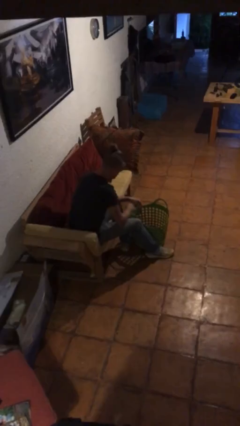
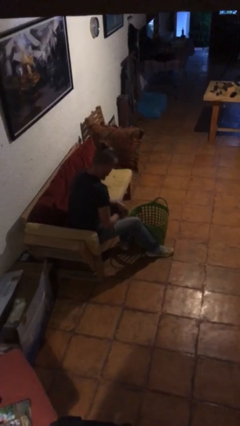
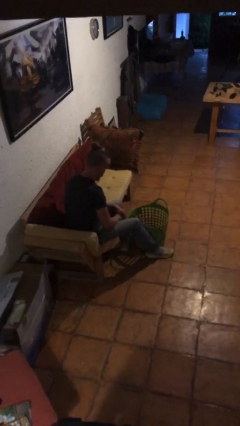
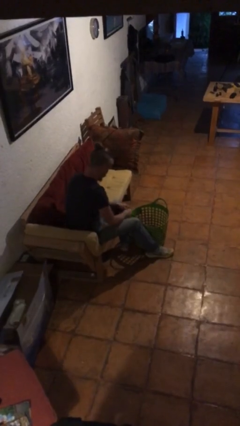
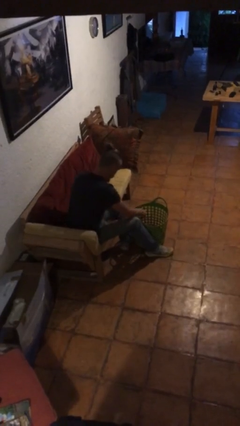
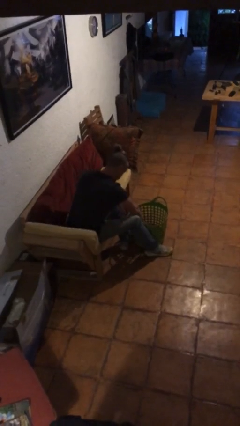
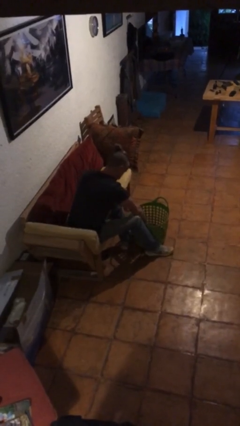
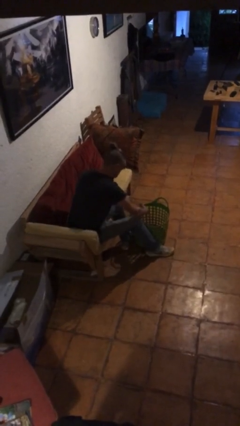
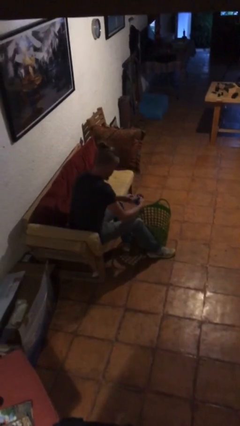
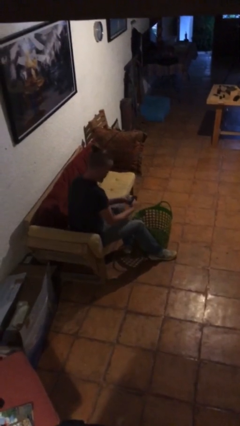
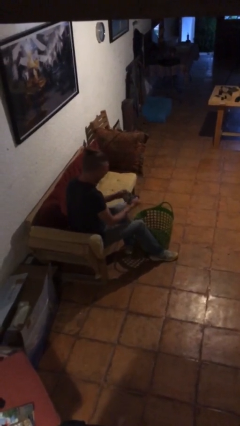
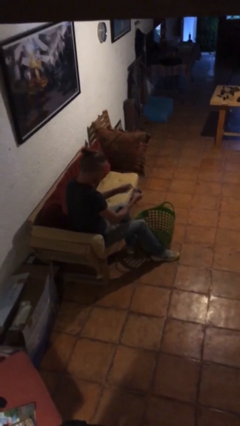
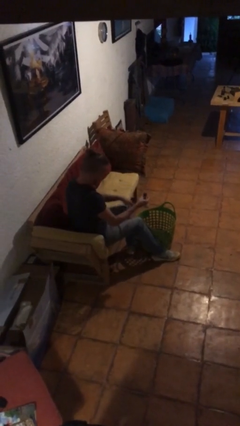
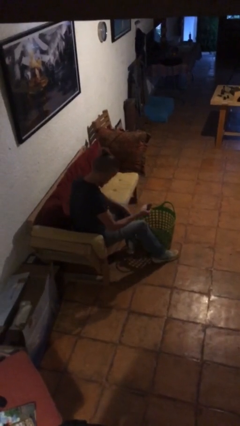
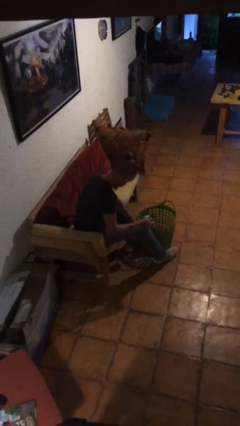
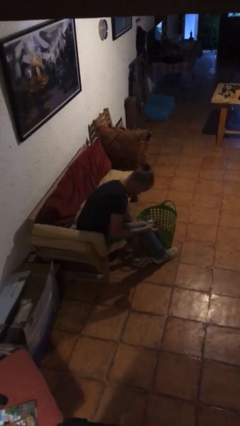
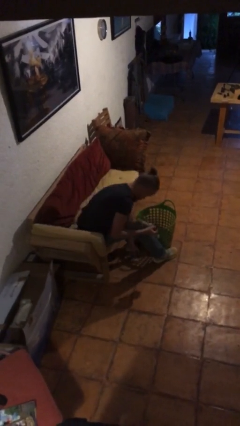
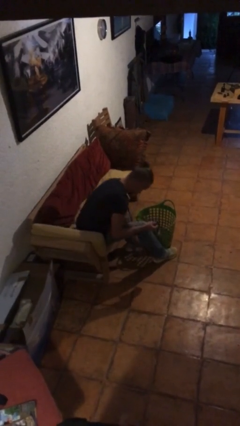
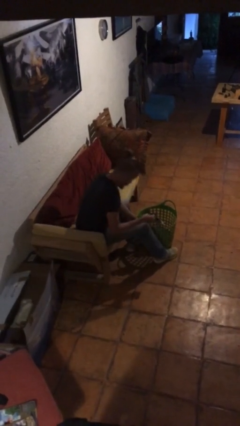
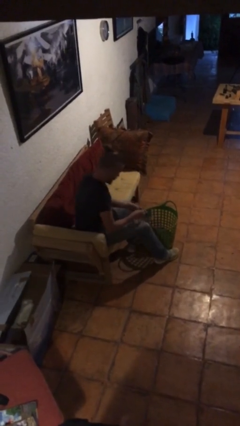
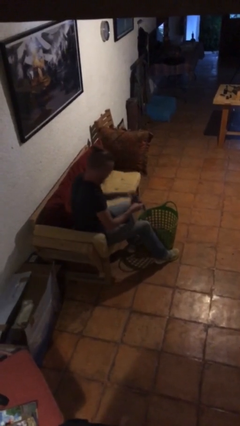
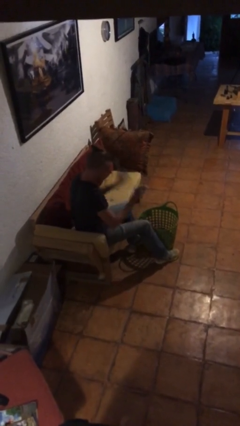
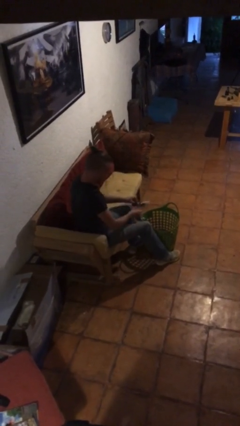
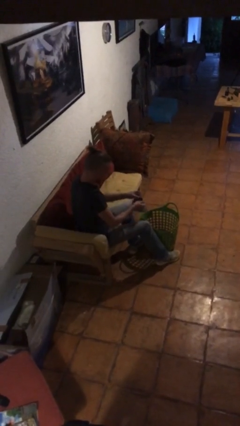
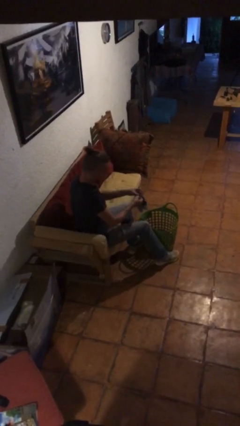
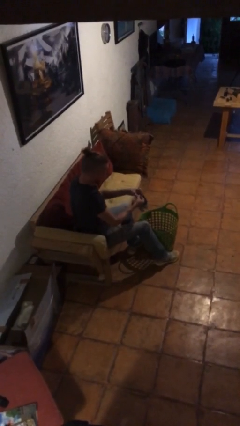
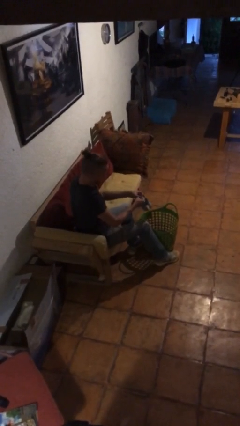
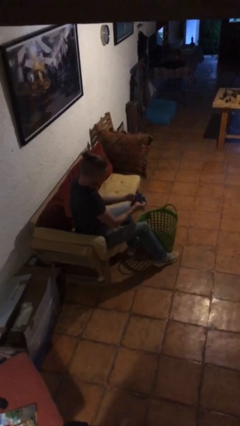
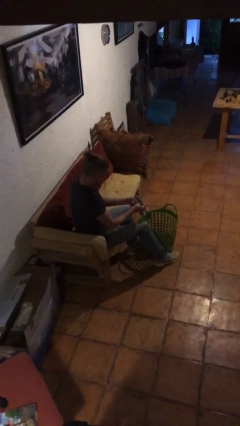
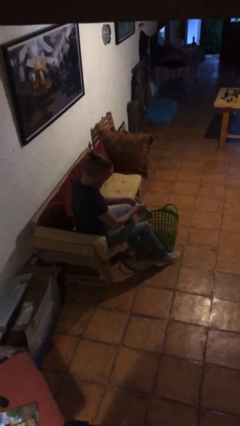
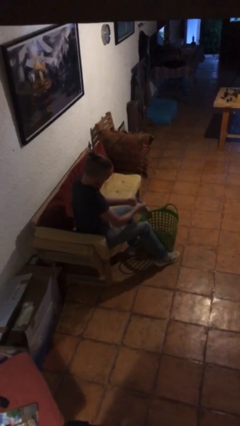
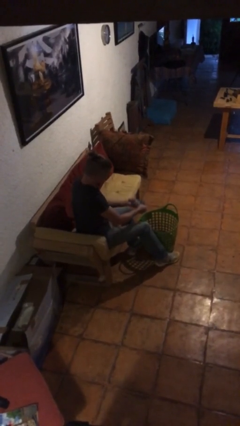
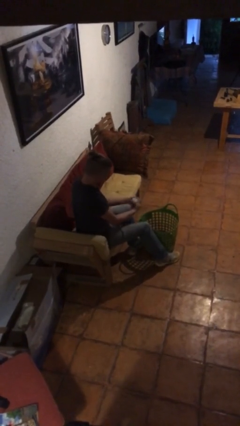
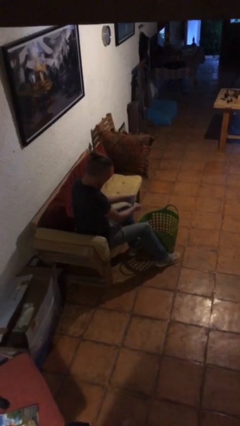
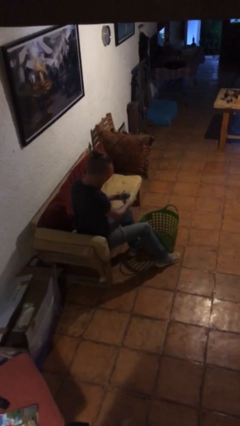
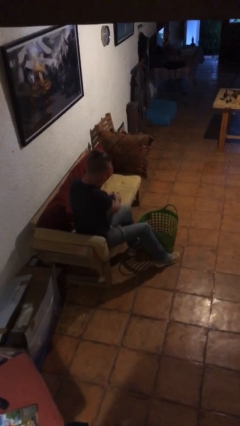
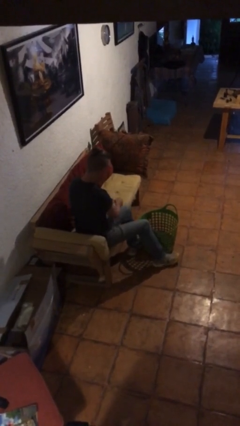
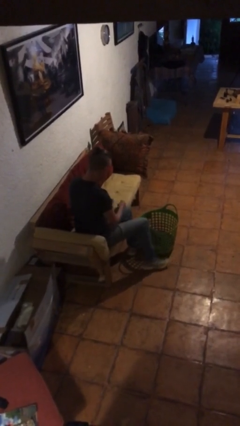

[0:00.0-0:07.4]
person folds socks

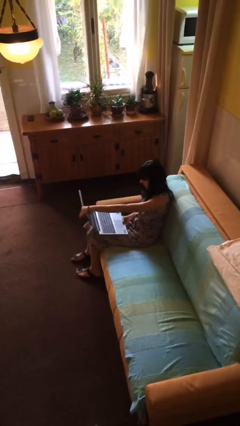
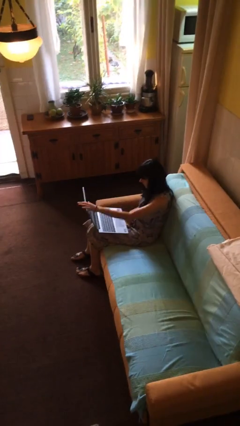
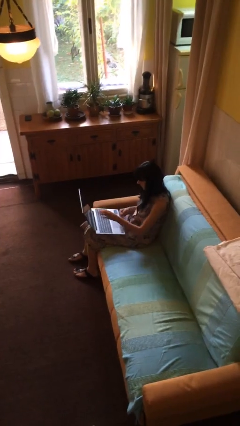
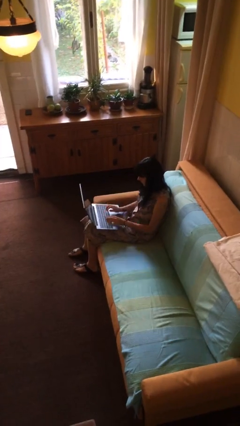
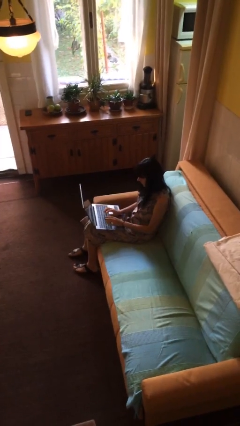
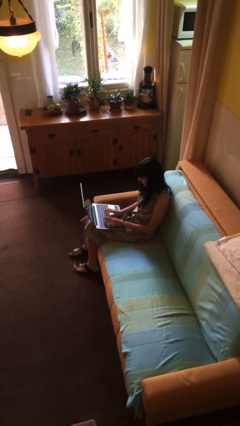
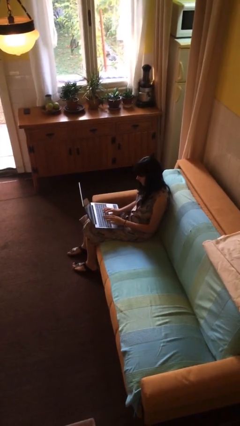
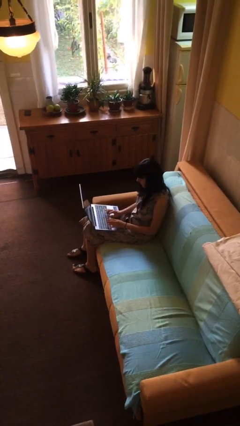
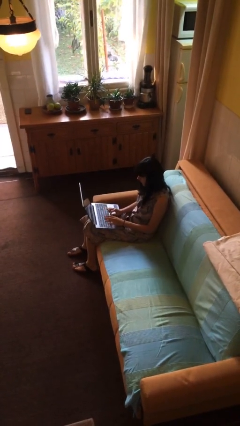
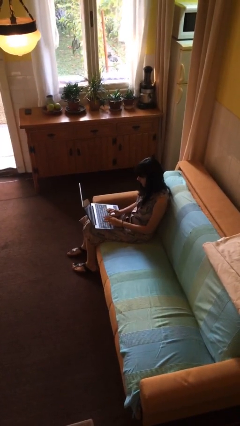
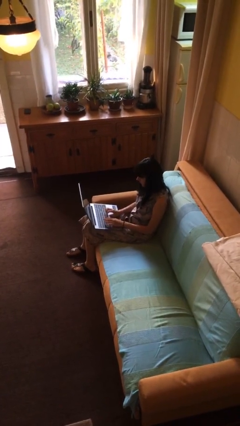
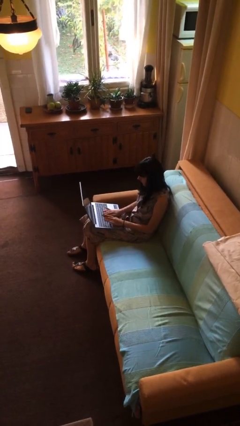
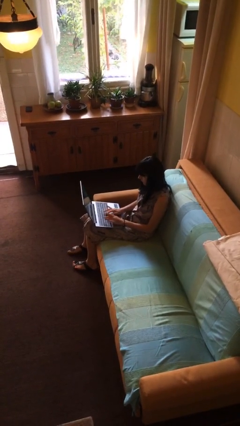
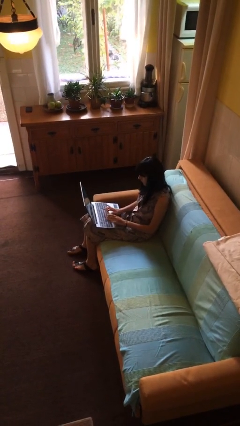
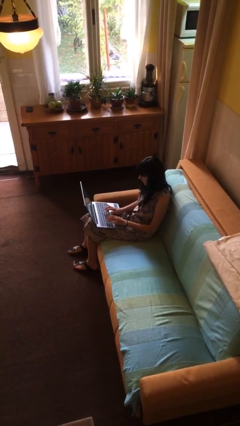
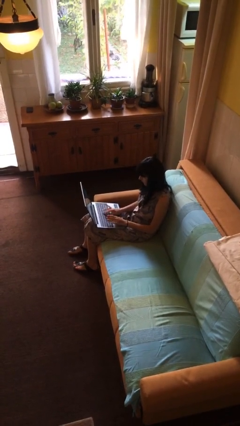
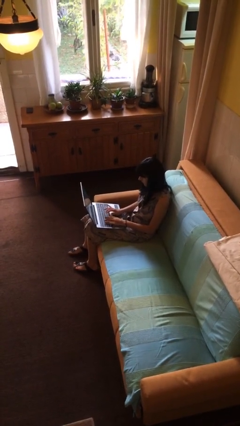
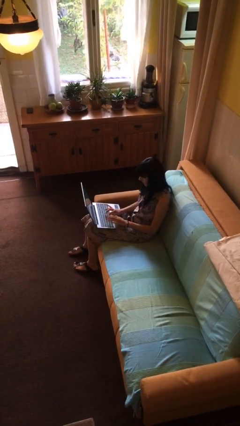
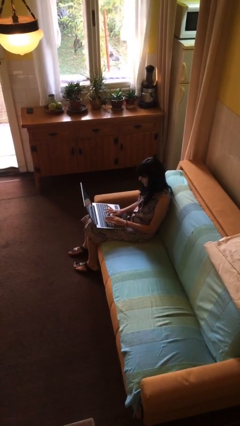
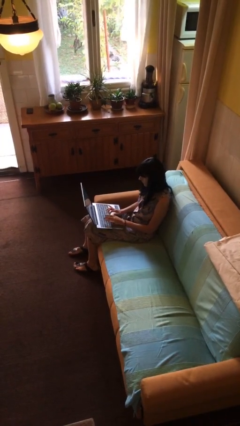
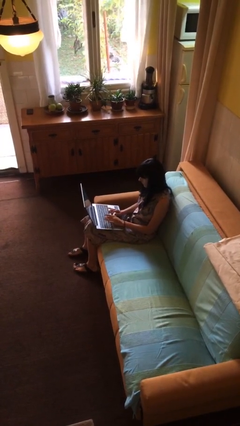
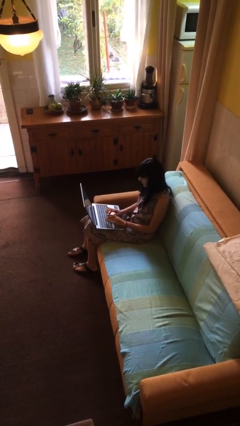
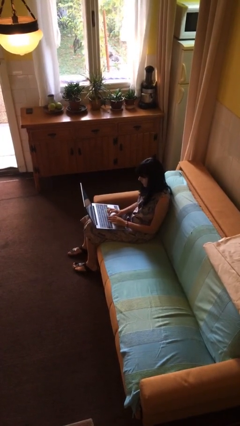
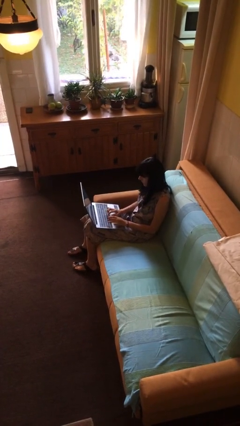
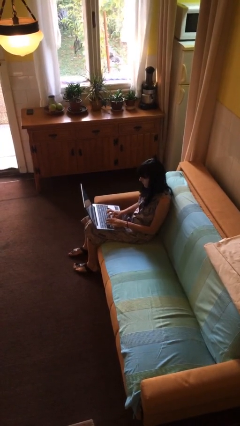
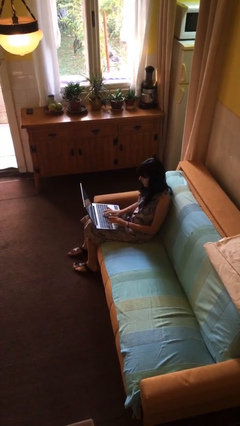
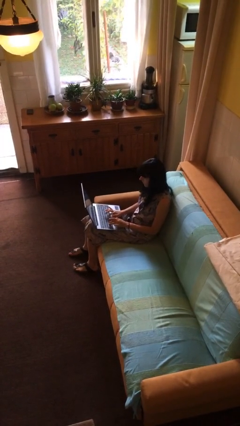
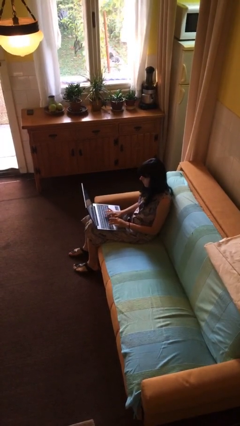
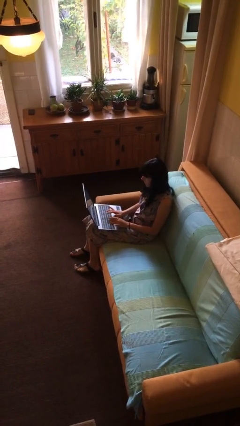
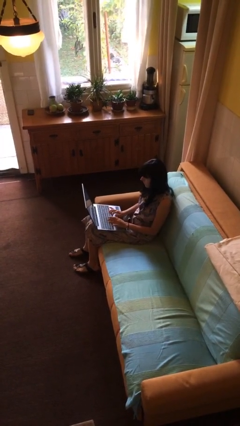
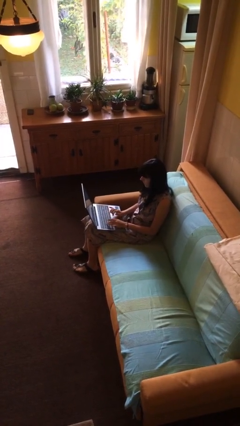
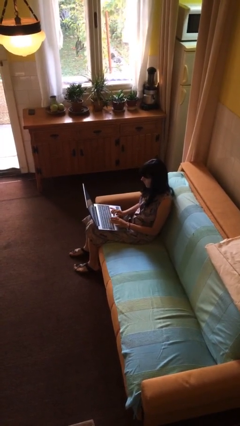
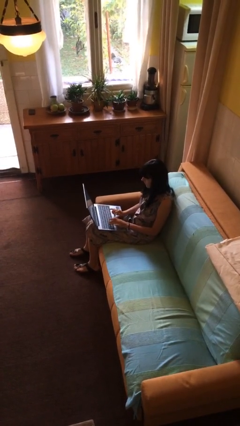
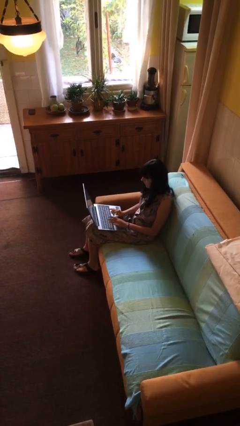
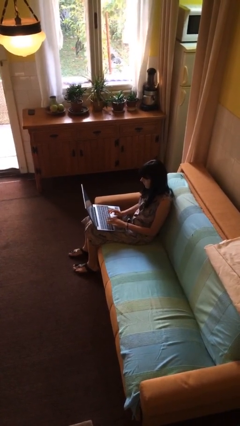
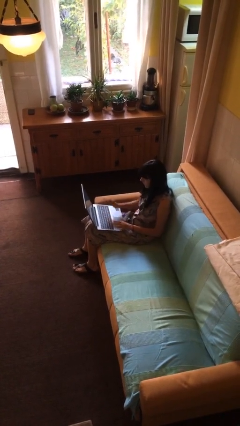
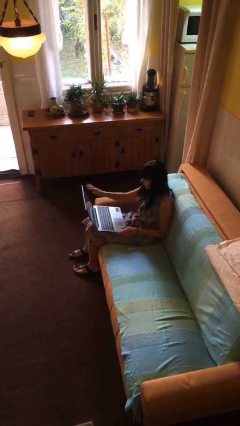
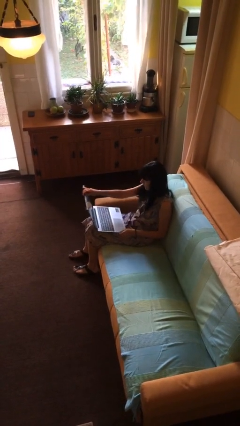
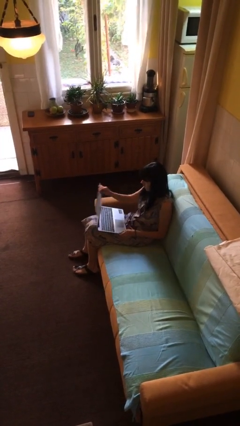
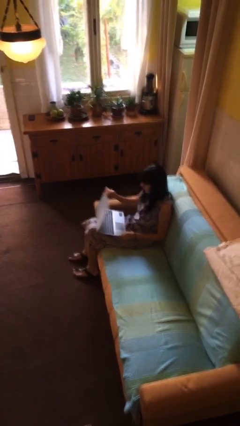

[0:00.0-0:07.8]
person interacts with laptop

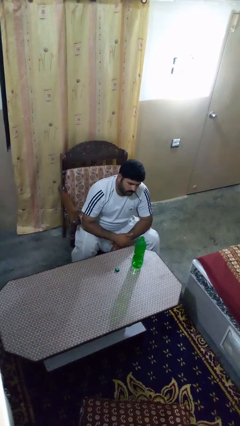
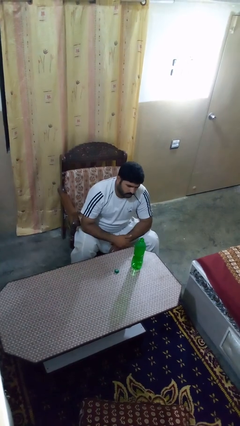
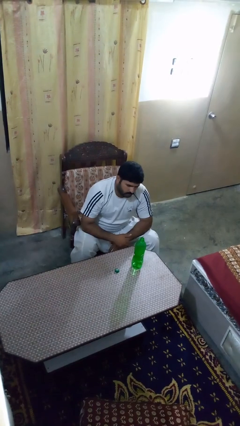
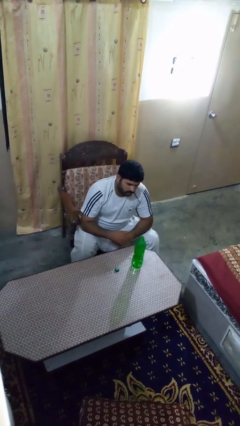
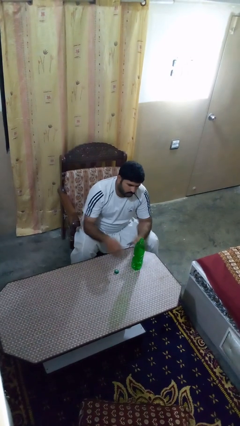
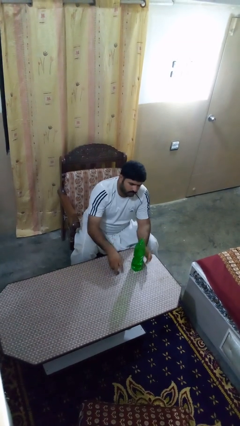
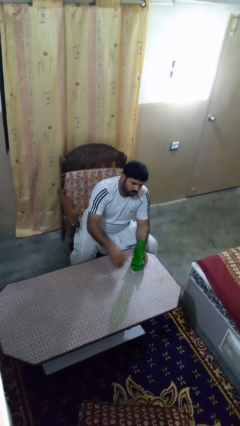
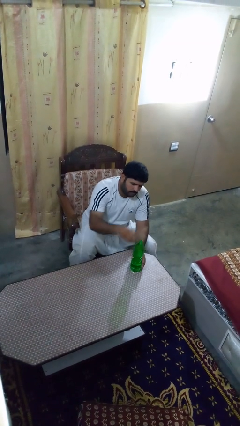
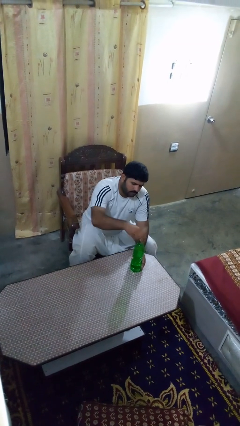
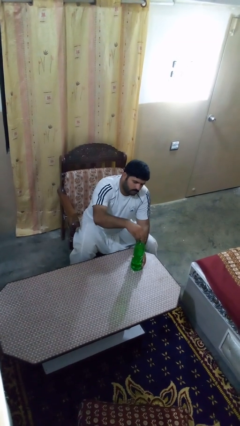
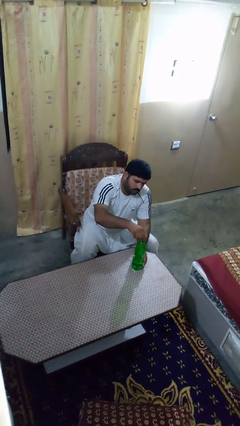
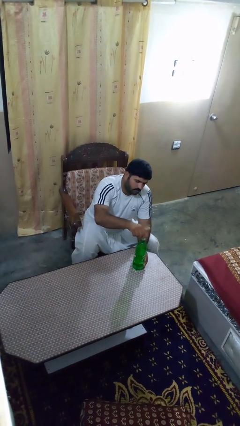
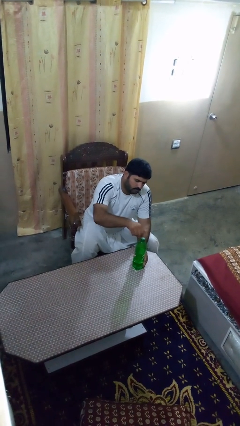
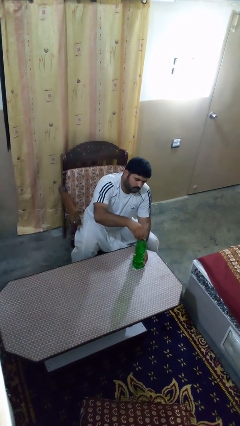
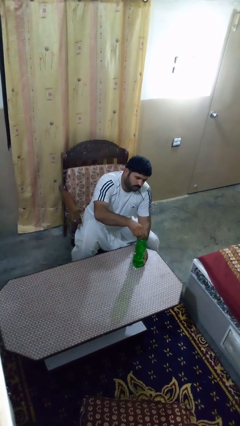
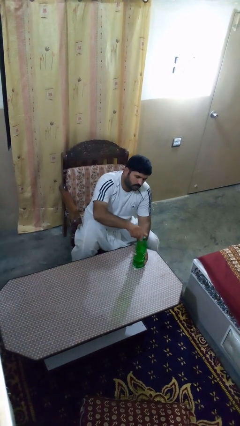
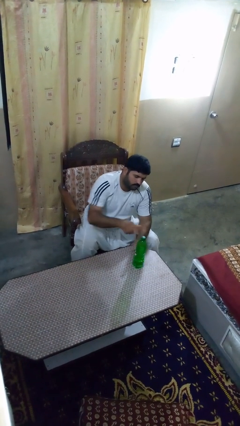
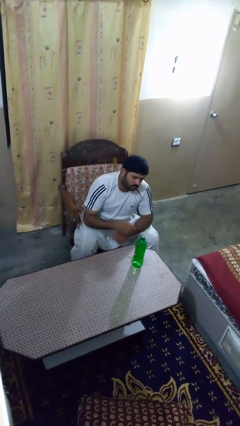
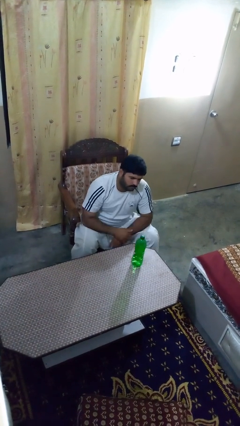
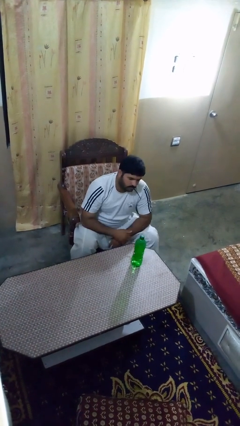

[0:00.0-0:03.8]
person screws lid to bottle
